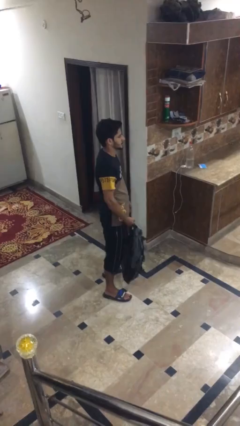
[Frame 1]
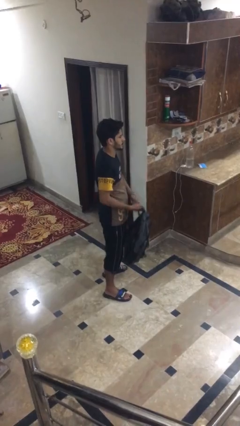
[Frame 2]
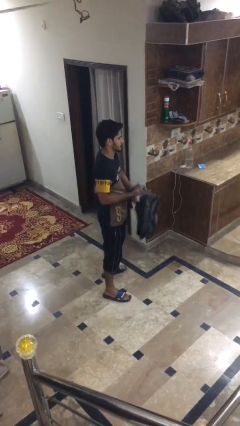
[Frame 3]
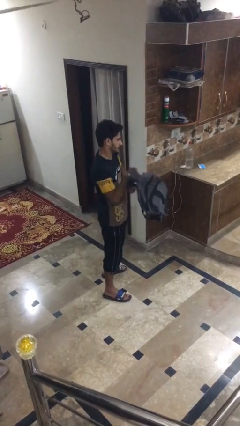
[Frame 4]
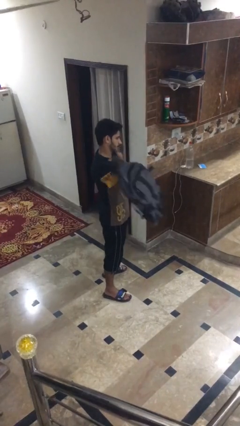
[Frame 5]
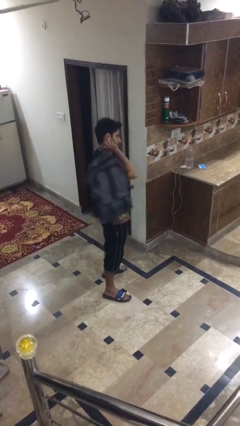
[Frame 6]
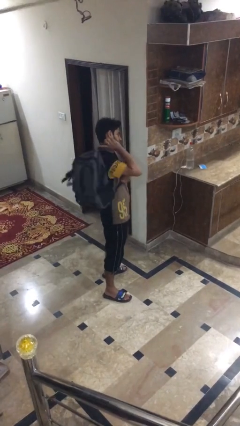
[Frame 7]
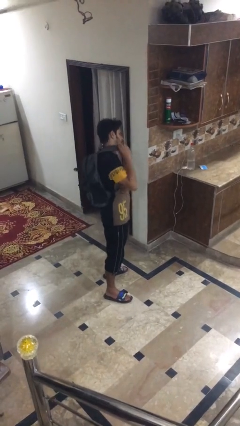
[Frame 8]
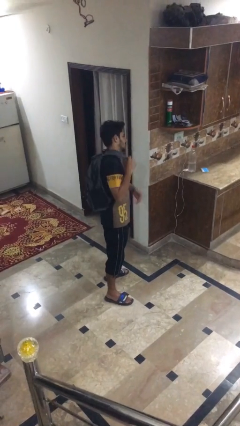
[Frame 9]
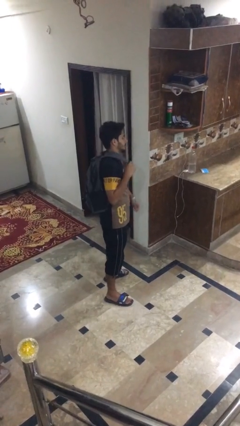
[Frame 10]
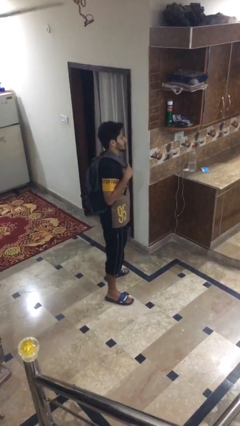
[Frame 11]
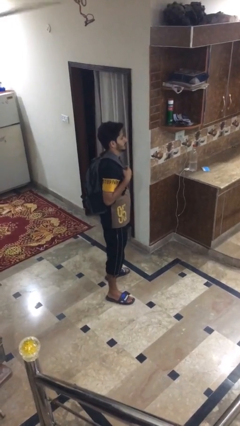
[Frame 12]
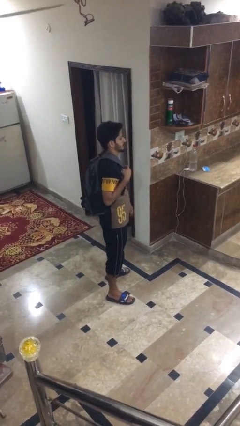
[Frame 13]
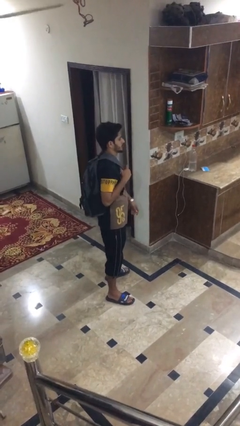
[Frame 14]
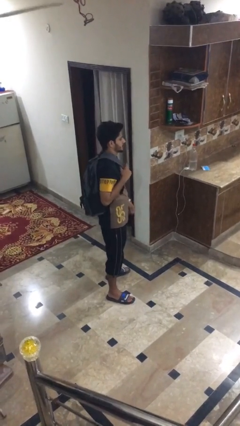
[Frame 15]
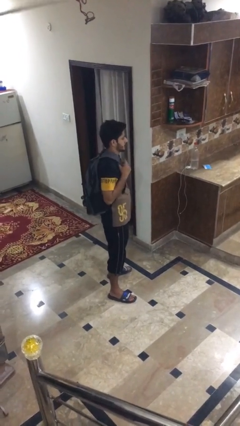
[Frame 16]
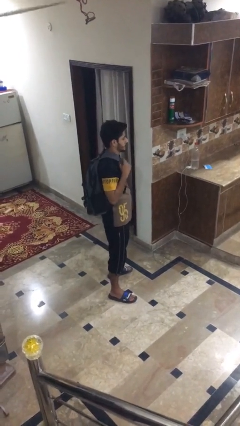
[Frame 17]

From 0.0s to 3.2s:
person puts on backpack

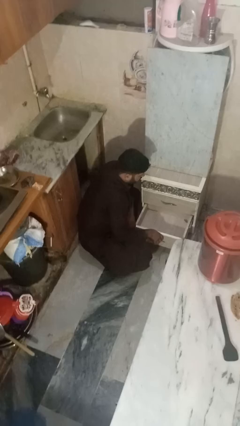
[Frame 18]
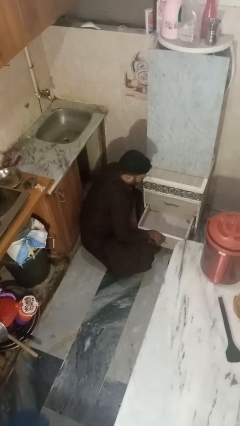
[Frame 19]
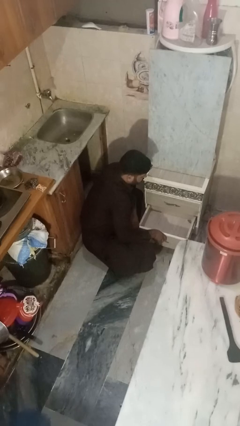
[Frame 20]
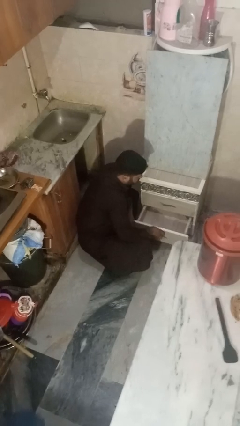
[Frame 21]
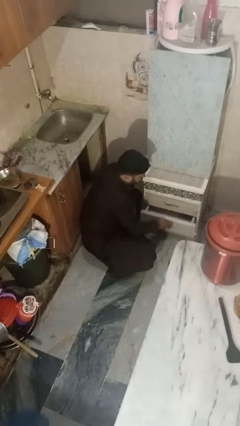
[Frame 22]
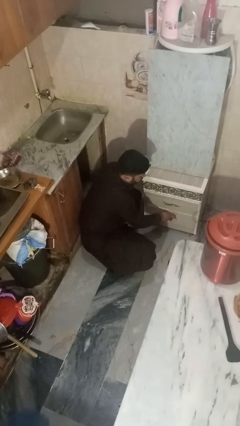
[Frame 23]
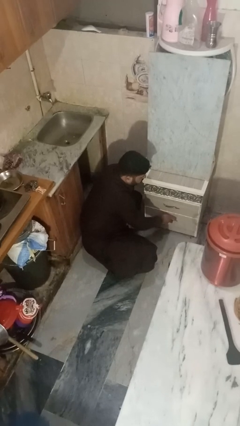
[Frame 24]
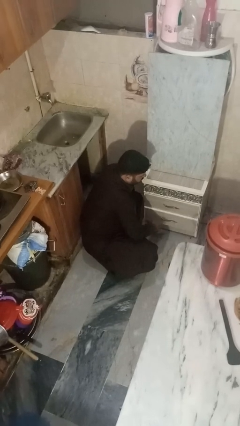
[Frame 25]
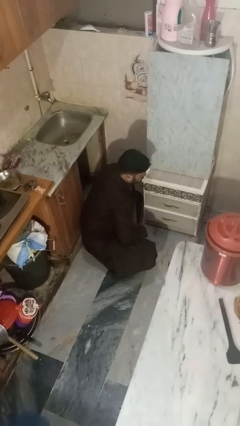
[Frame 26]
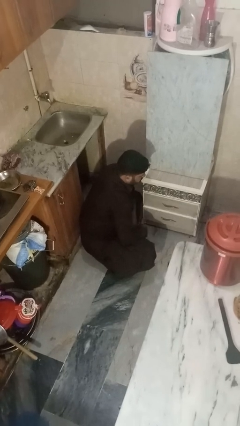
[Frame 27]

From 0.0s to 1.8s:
person closes kitchen drawer

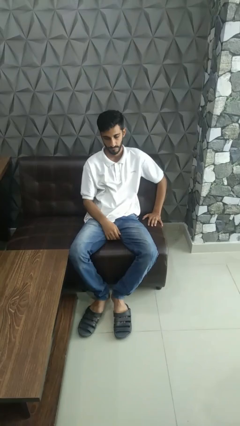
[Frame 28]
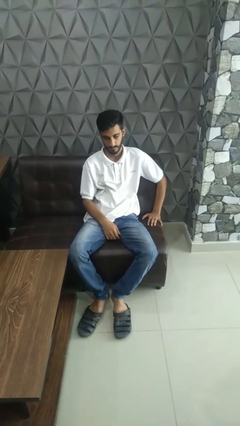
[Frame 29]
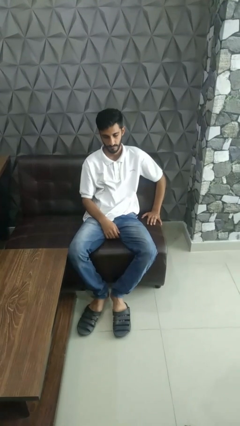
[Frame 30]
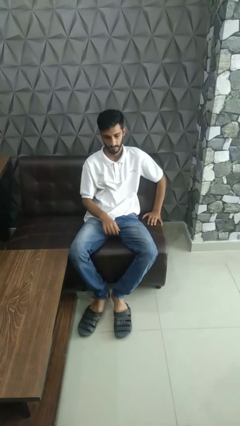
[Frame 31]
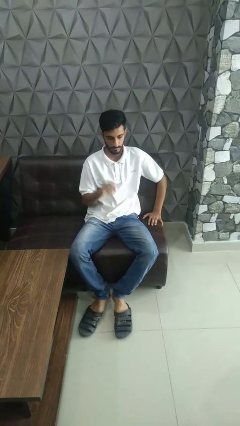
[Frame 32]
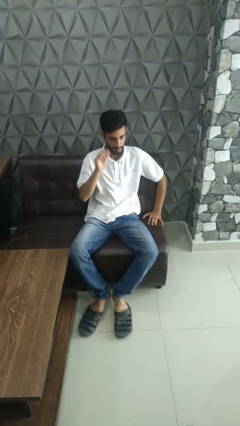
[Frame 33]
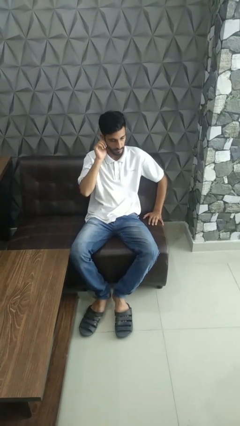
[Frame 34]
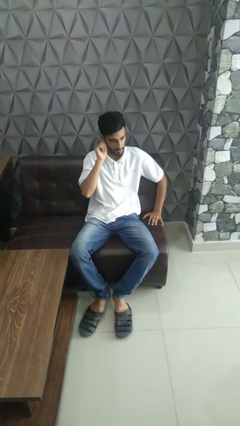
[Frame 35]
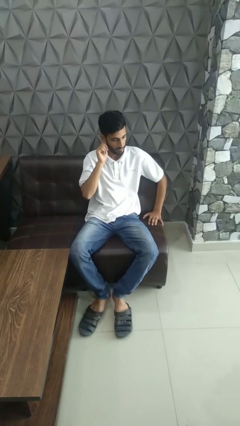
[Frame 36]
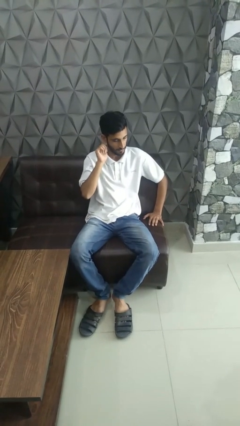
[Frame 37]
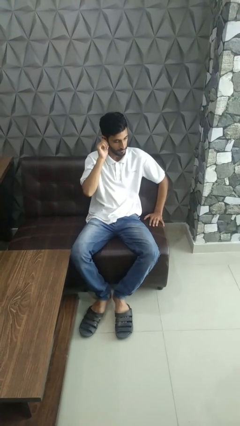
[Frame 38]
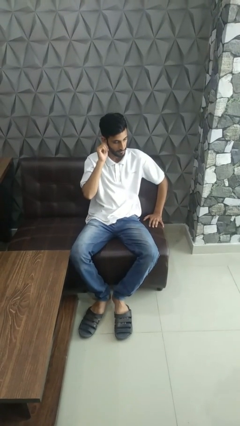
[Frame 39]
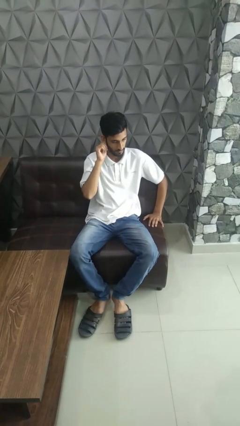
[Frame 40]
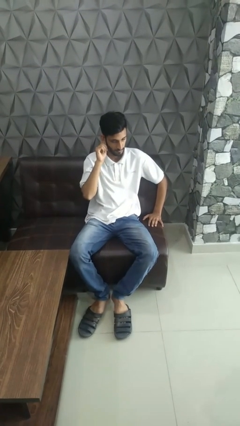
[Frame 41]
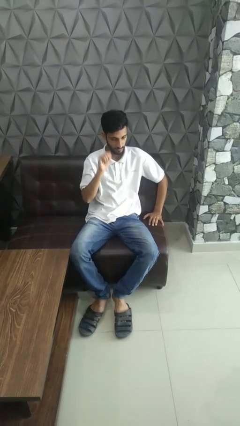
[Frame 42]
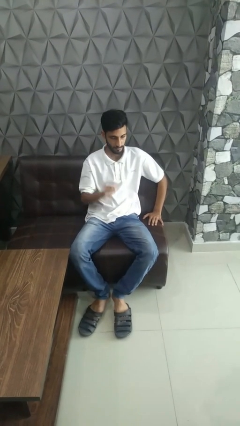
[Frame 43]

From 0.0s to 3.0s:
person touches earlobe

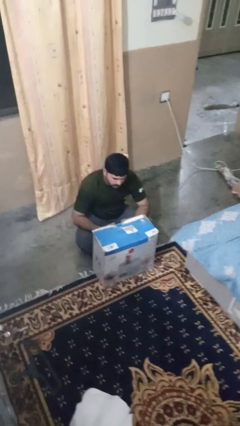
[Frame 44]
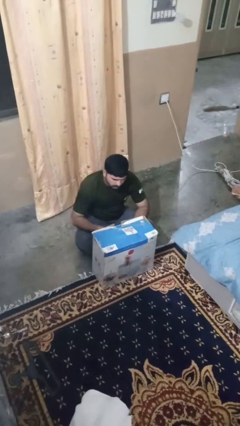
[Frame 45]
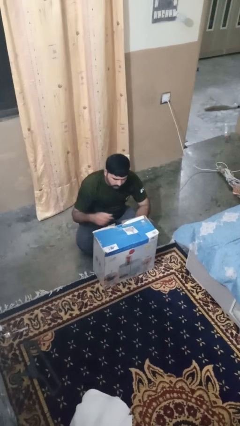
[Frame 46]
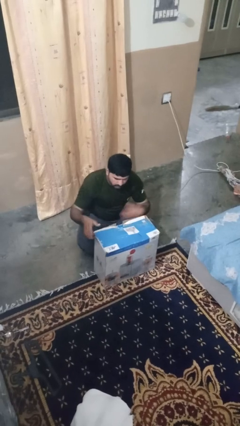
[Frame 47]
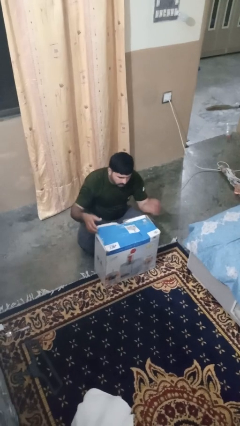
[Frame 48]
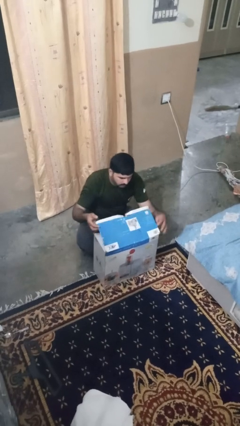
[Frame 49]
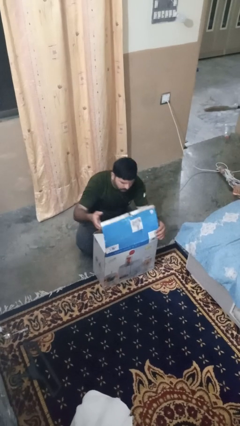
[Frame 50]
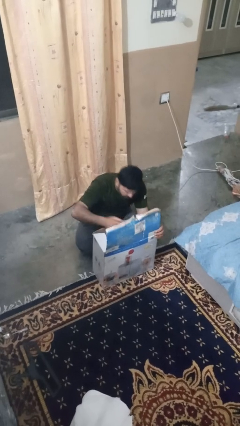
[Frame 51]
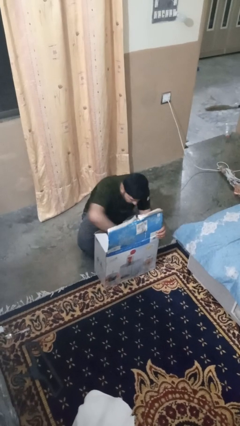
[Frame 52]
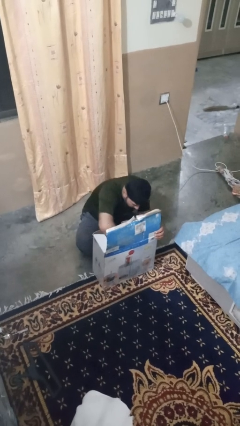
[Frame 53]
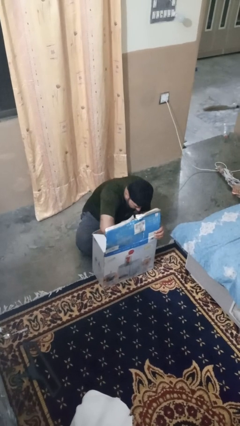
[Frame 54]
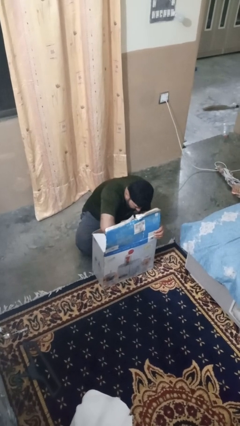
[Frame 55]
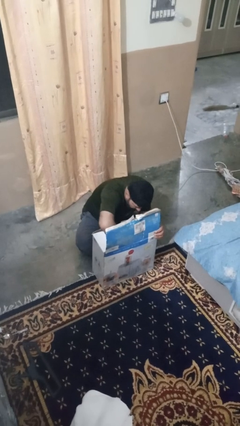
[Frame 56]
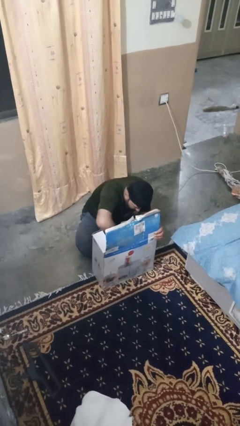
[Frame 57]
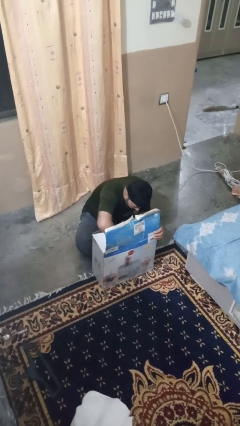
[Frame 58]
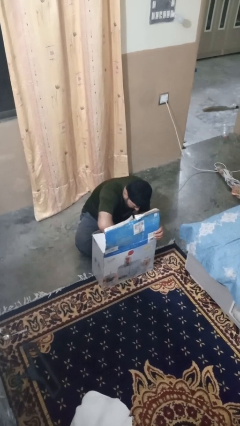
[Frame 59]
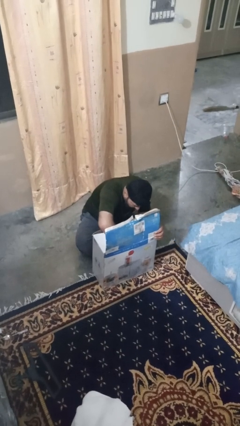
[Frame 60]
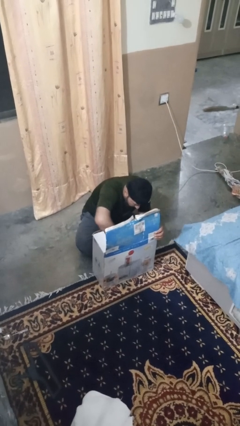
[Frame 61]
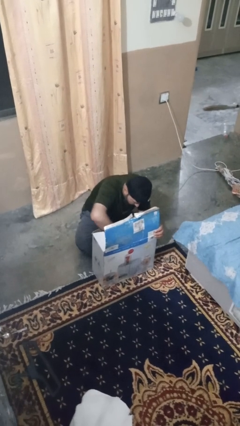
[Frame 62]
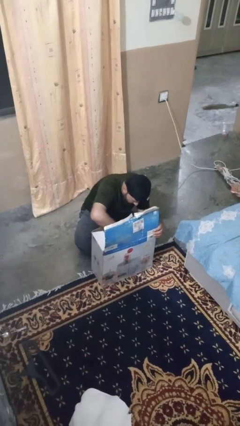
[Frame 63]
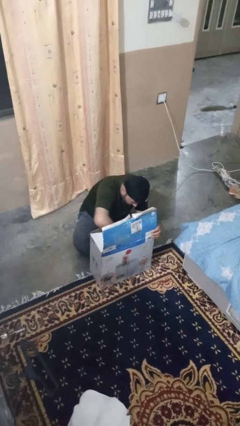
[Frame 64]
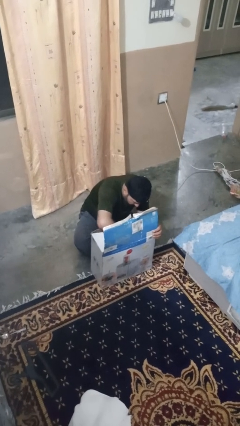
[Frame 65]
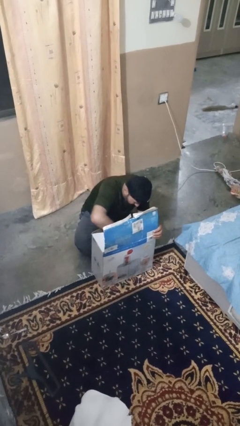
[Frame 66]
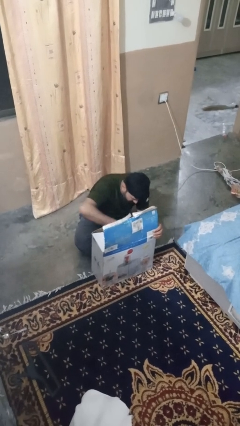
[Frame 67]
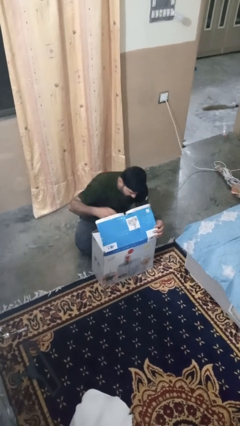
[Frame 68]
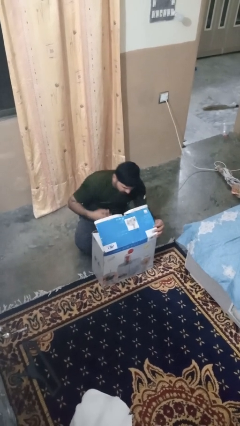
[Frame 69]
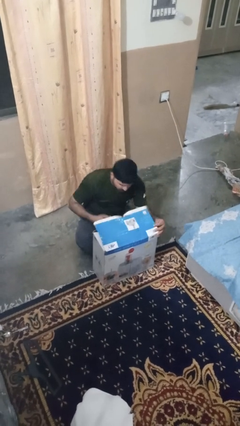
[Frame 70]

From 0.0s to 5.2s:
person searches in box

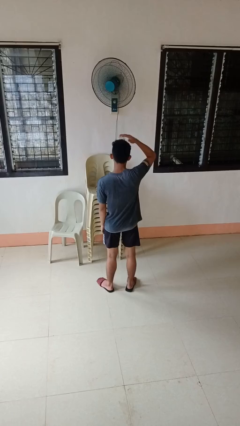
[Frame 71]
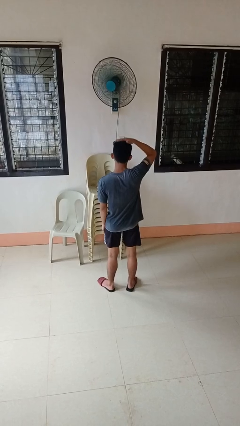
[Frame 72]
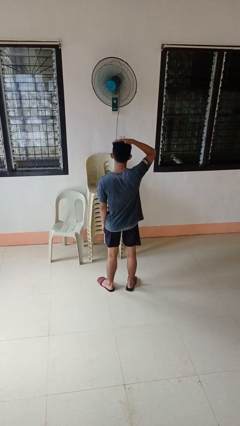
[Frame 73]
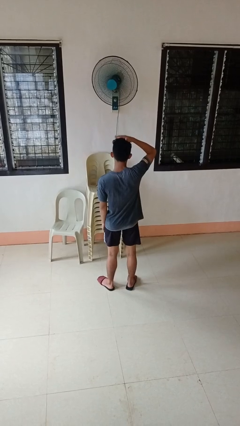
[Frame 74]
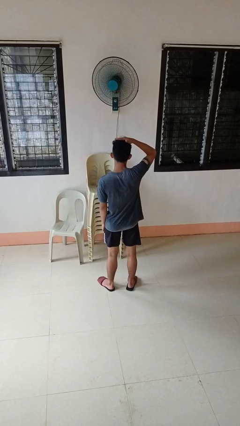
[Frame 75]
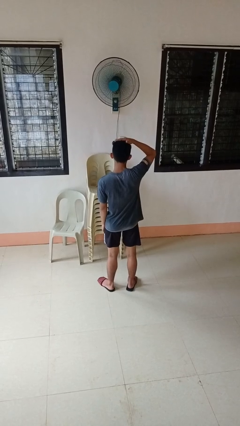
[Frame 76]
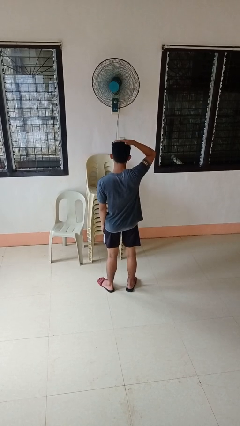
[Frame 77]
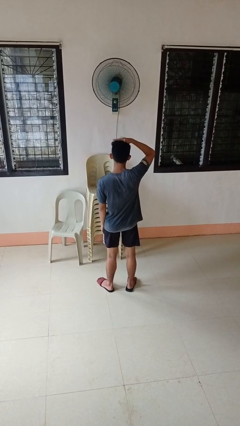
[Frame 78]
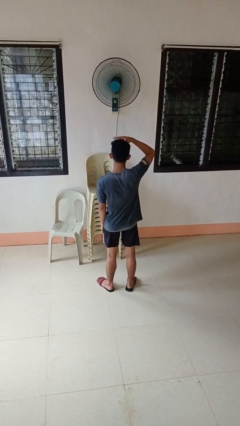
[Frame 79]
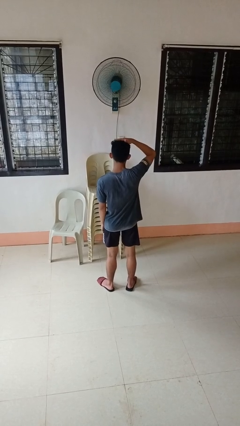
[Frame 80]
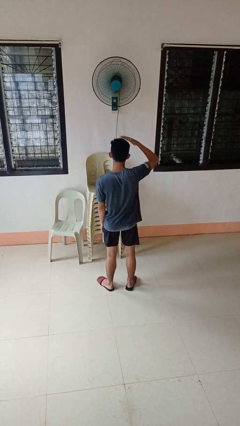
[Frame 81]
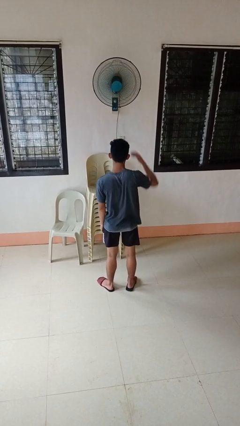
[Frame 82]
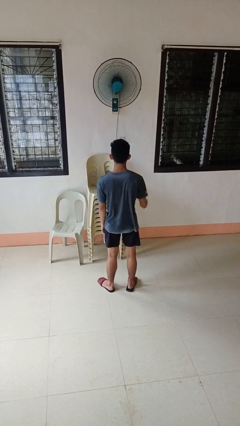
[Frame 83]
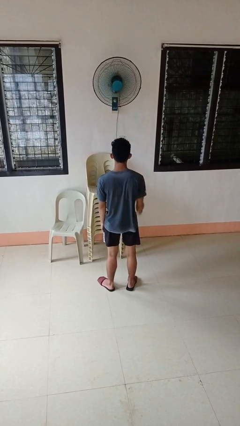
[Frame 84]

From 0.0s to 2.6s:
person pats head

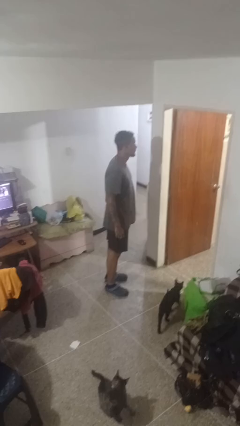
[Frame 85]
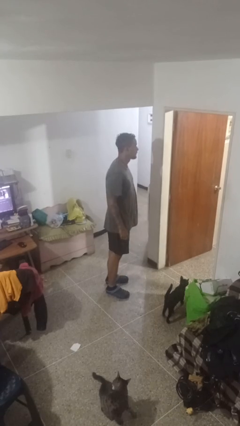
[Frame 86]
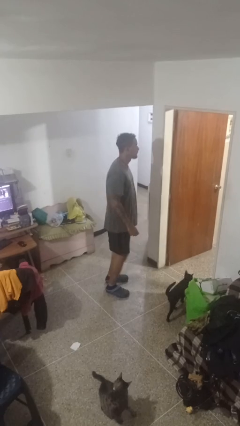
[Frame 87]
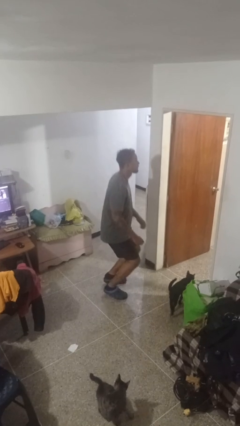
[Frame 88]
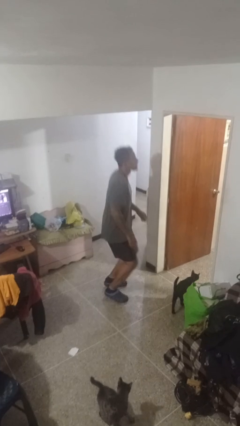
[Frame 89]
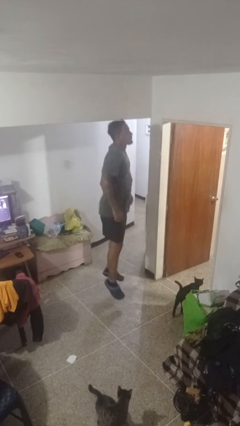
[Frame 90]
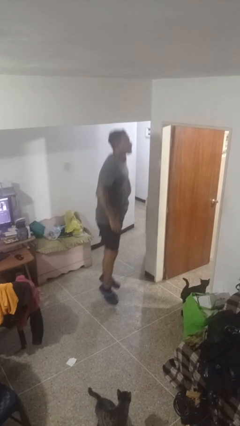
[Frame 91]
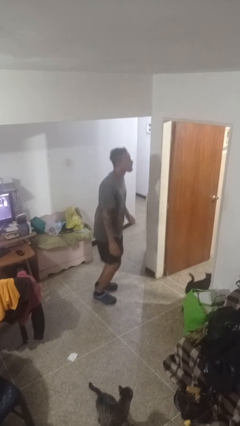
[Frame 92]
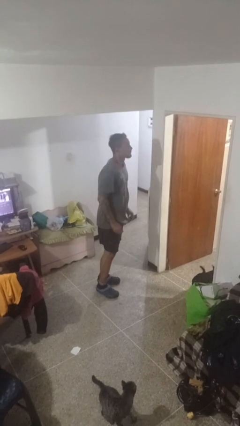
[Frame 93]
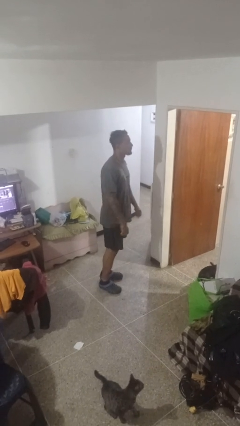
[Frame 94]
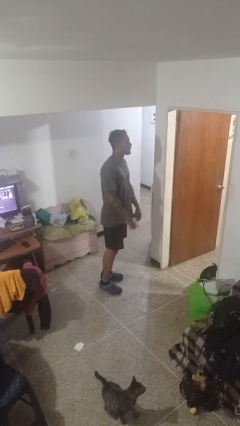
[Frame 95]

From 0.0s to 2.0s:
person jumps
